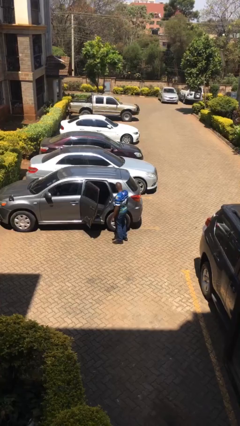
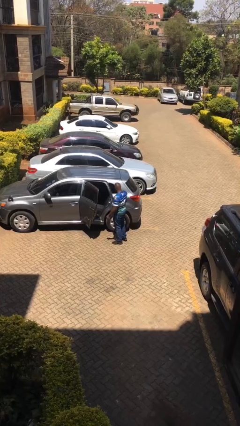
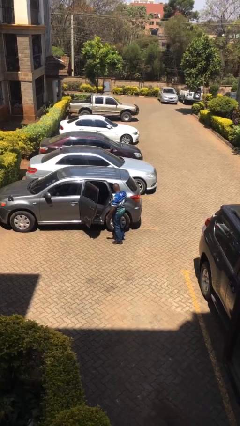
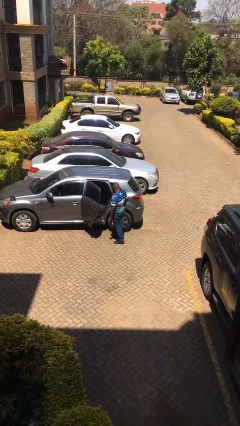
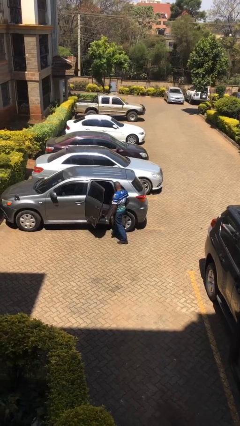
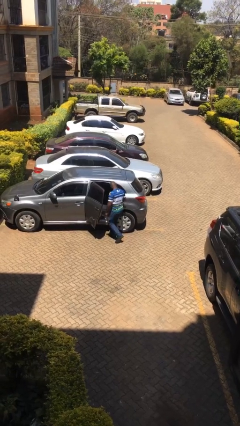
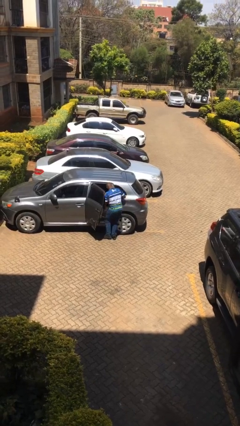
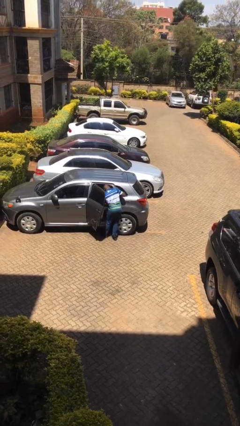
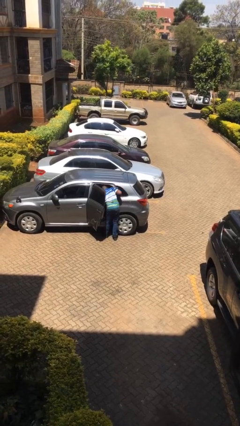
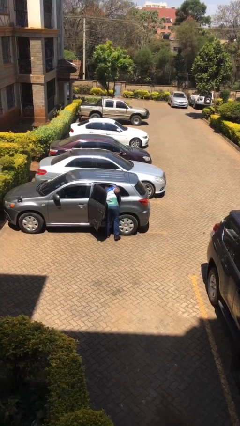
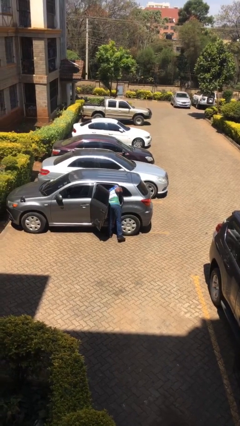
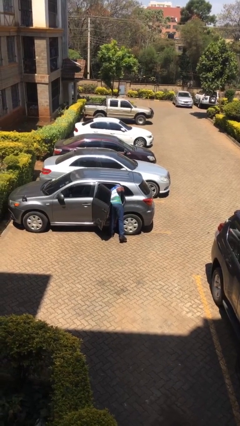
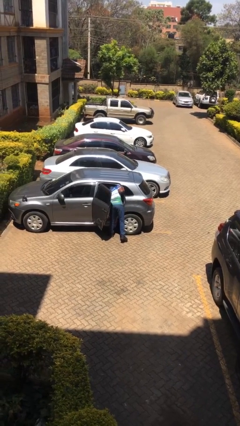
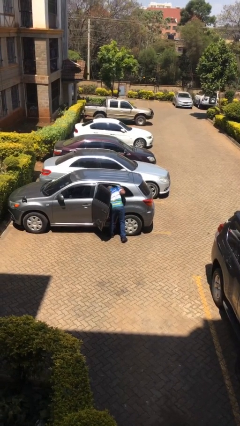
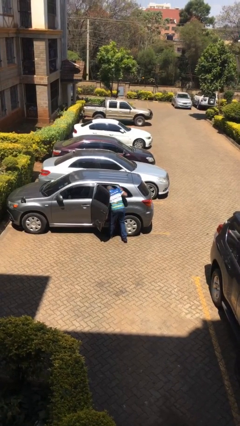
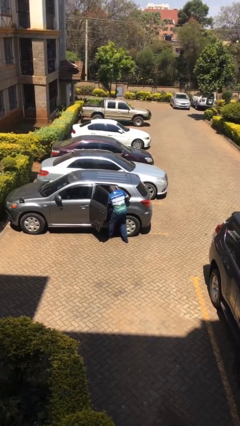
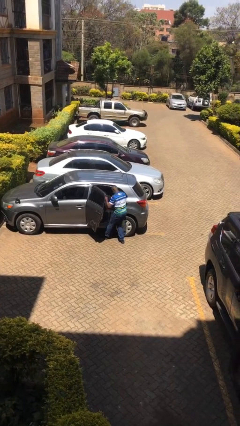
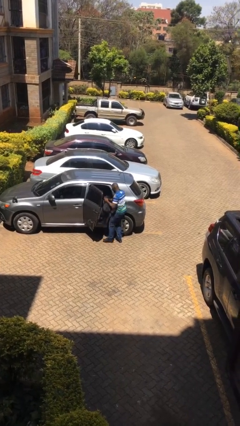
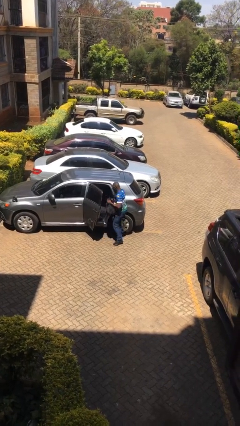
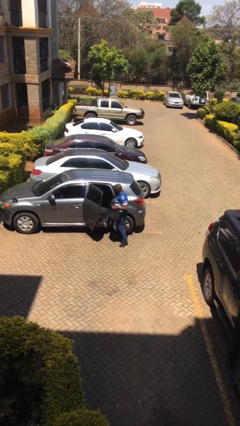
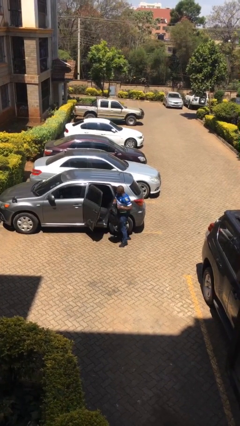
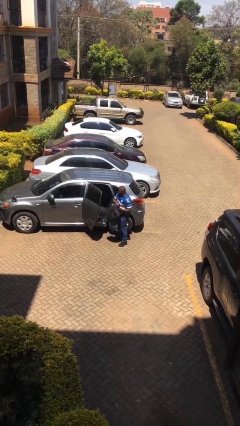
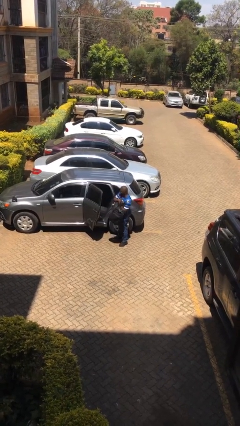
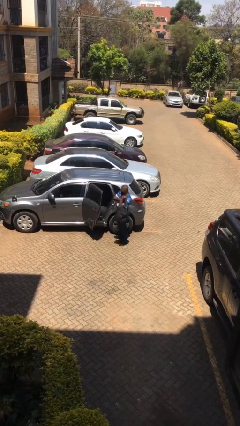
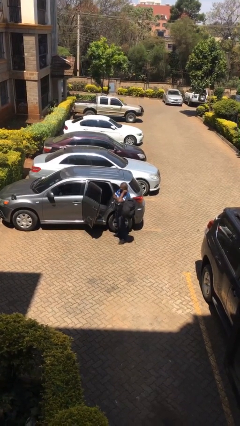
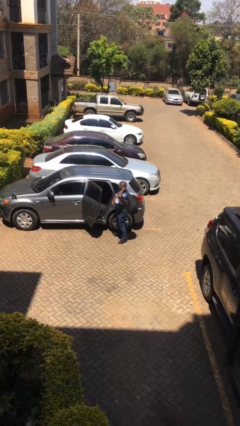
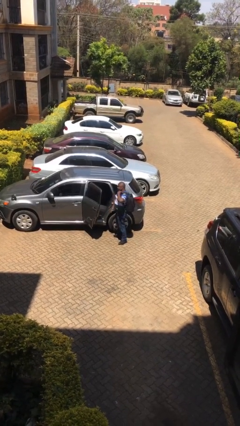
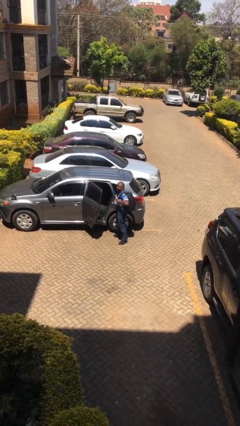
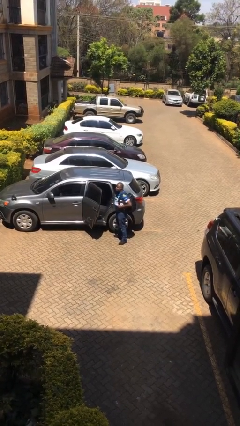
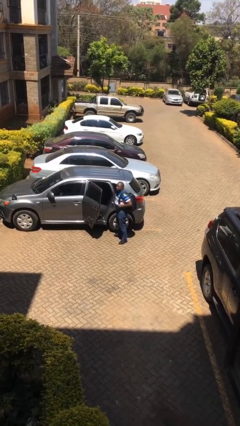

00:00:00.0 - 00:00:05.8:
person unloads car

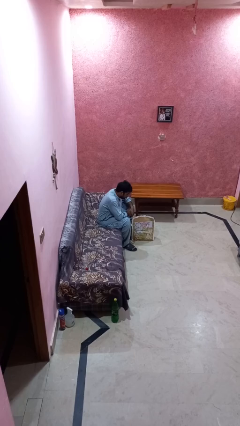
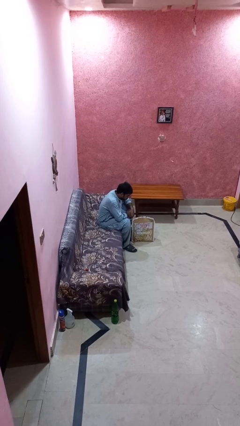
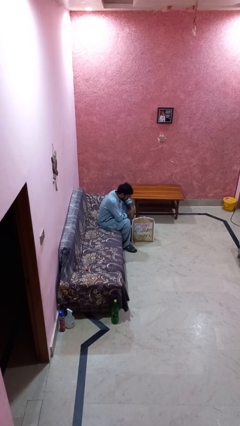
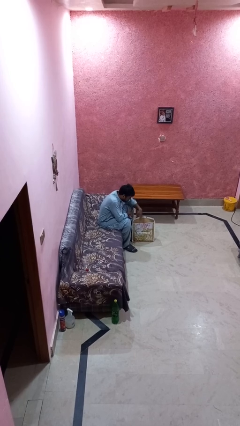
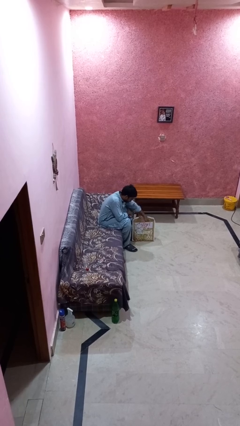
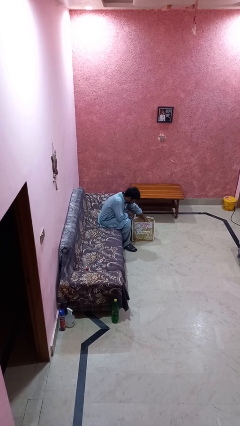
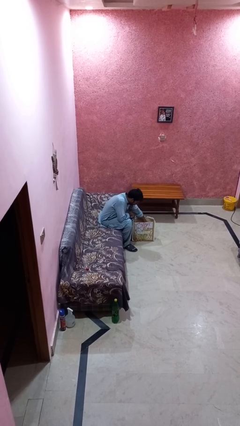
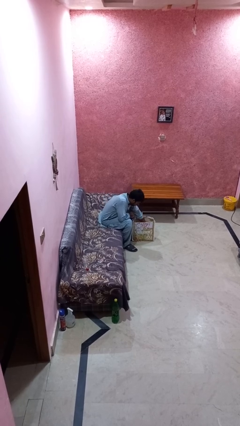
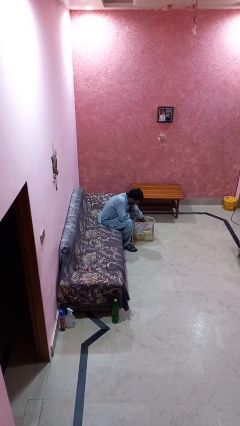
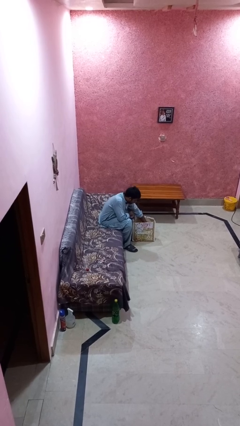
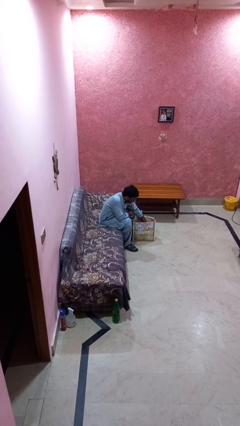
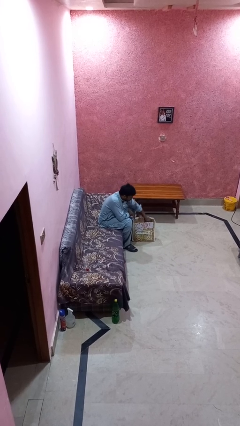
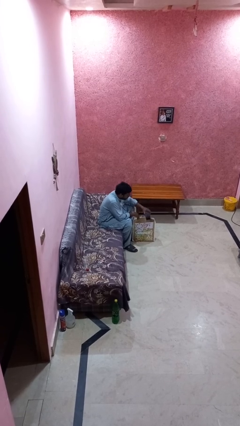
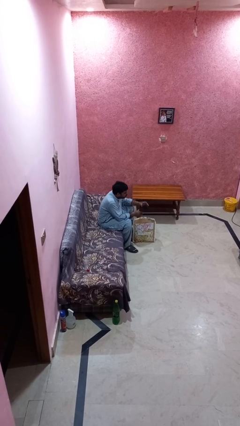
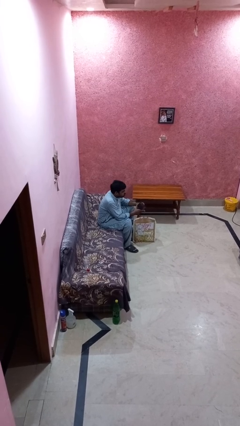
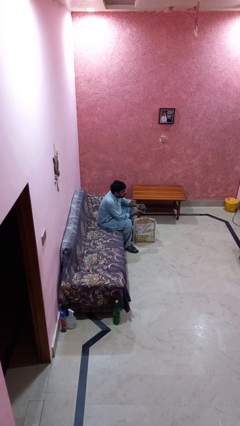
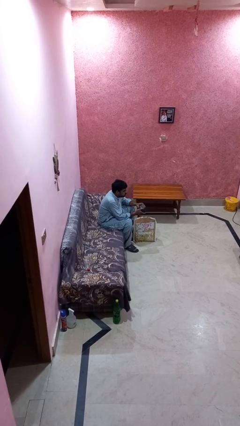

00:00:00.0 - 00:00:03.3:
person takes object from bag

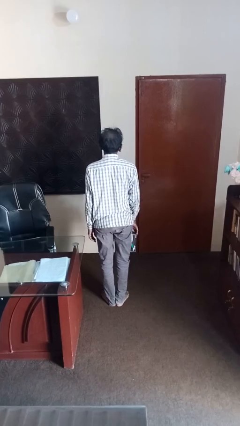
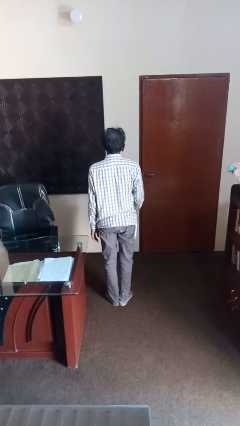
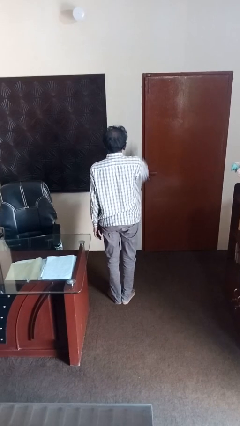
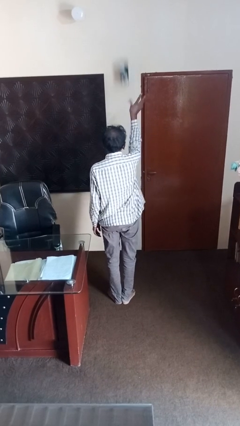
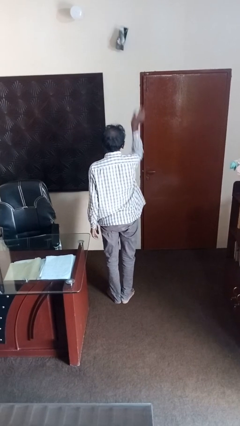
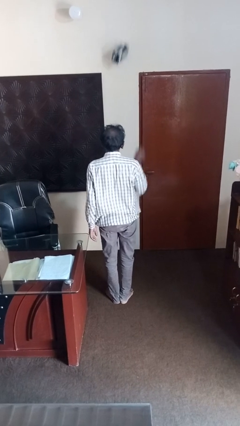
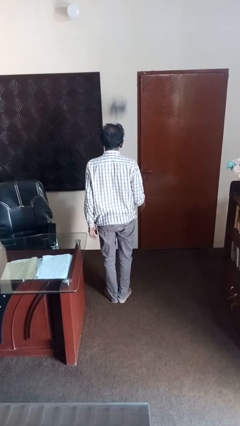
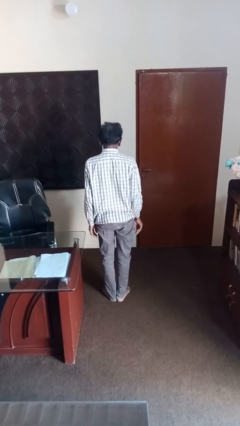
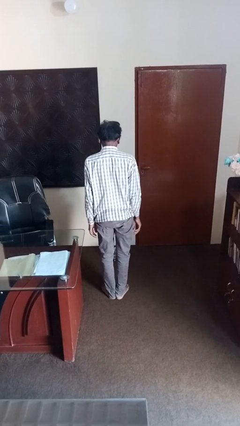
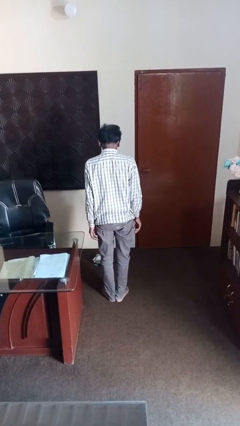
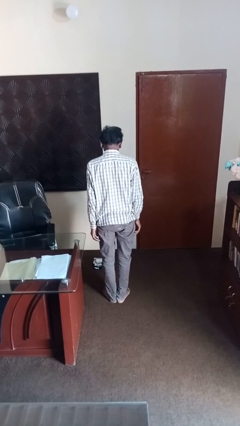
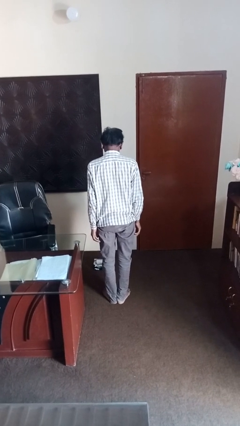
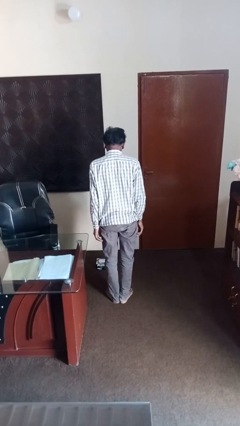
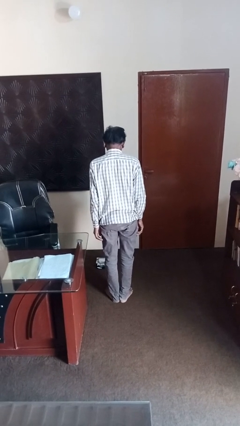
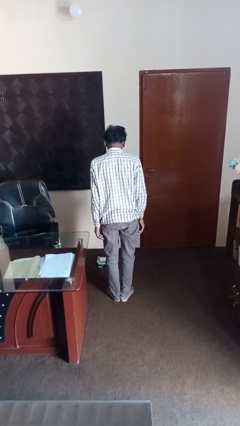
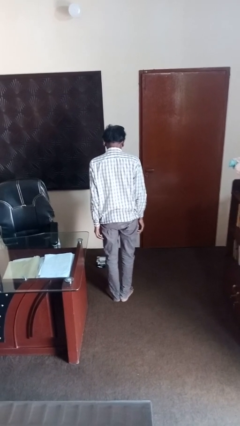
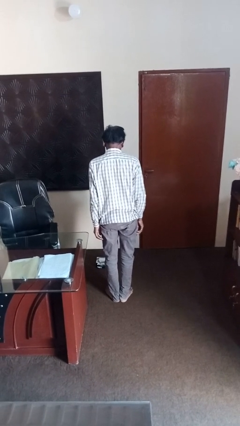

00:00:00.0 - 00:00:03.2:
person throws object into air

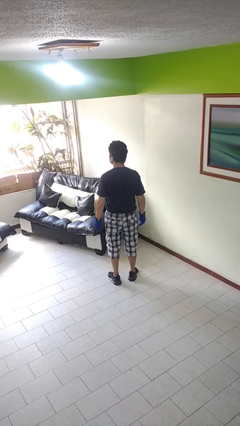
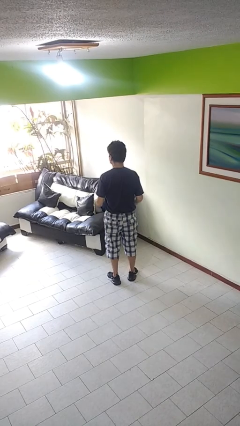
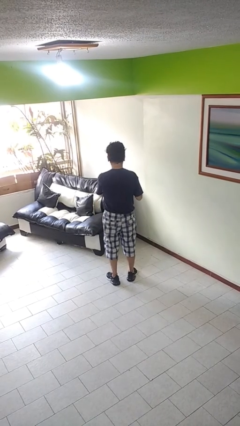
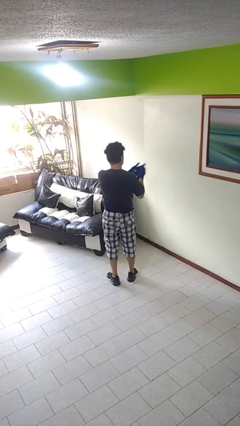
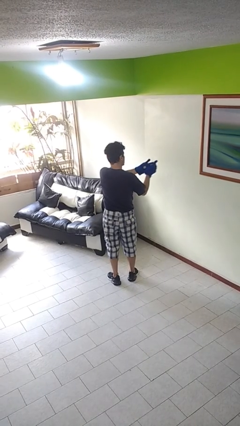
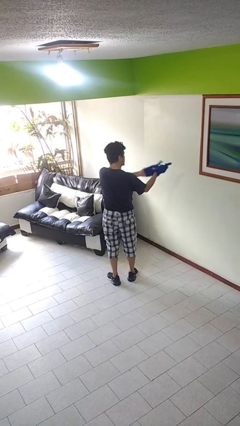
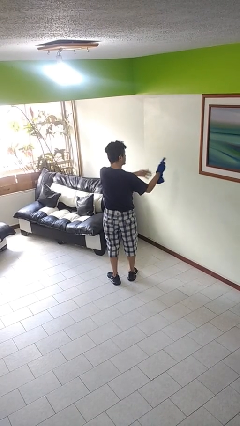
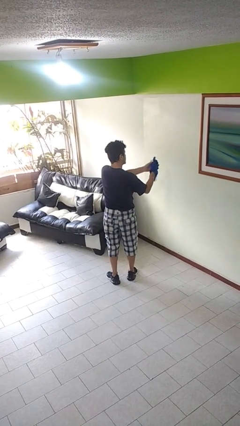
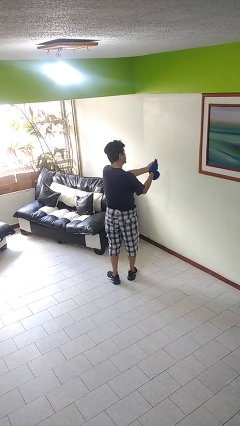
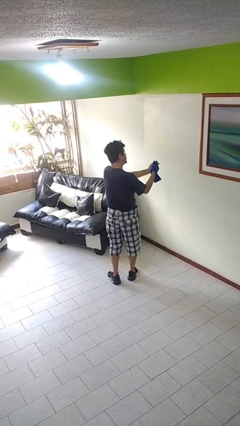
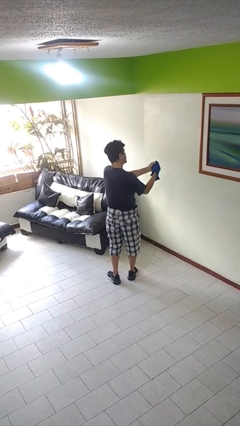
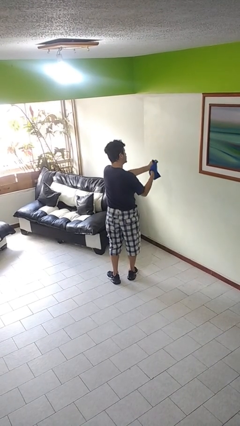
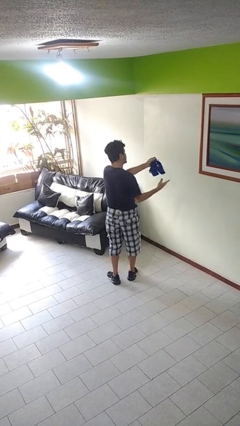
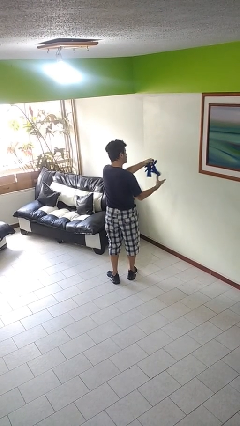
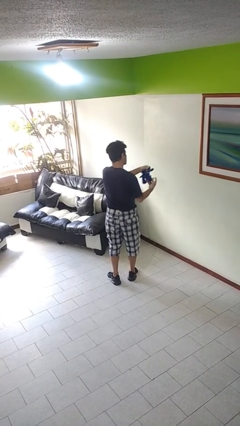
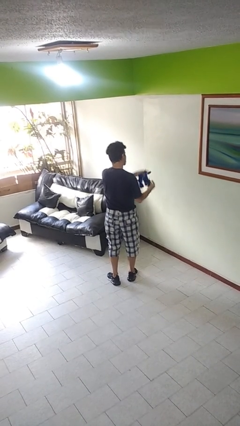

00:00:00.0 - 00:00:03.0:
person takes off gloves

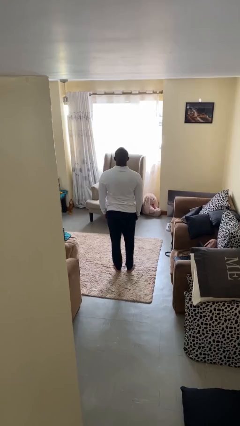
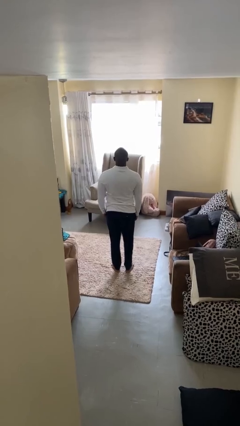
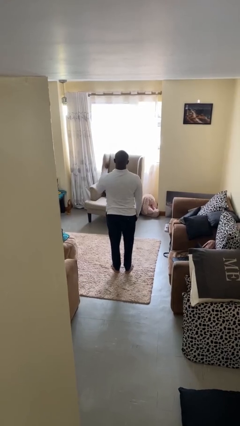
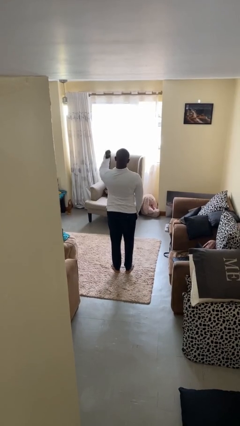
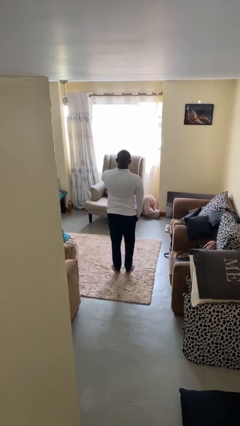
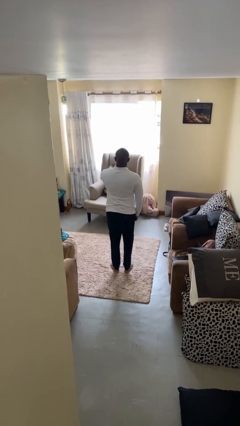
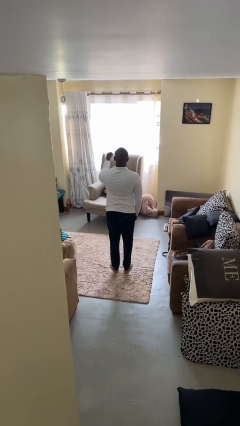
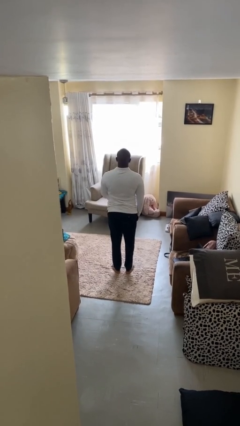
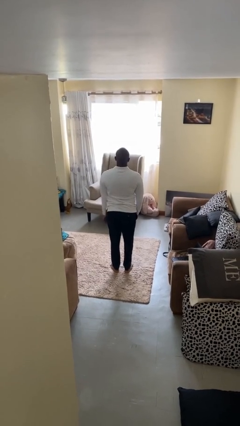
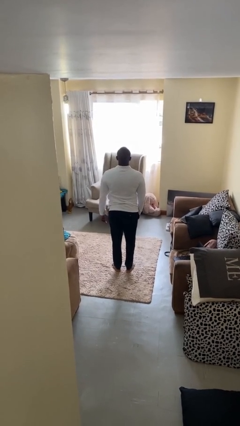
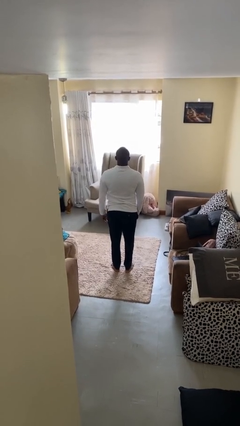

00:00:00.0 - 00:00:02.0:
person karate chop
